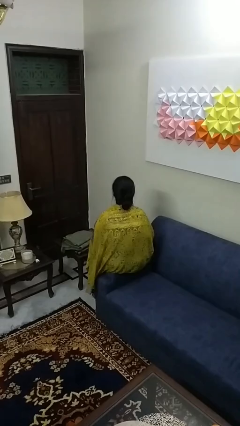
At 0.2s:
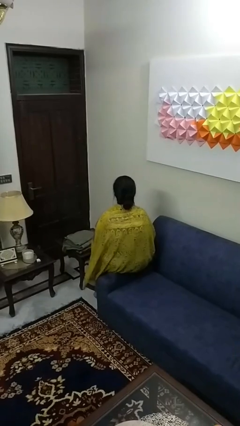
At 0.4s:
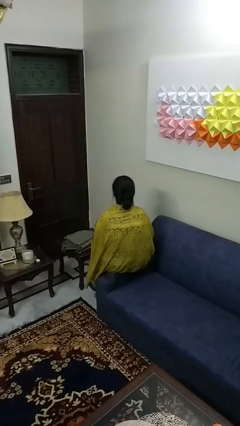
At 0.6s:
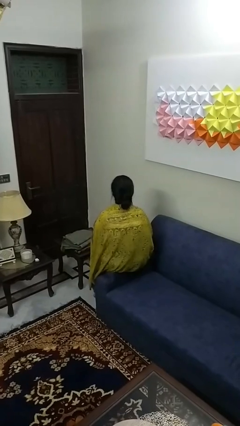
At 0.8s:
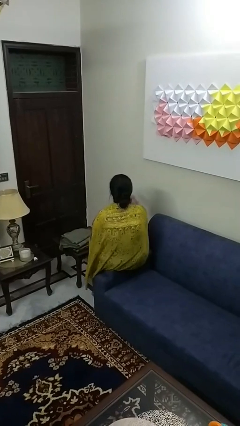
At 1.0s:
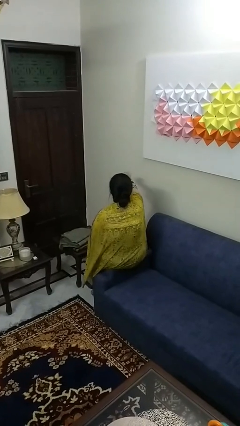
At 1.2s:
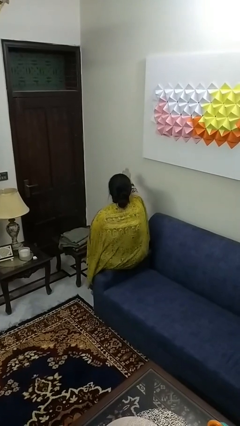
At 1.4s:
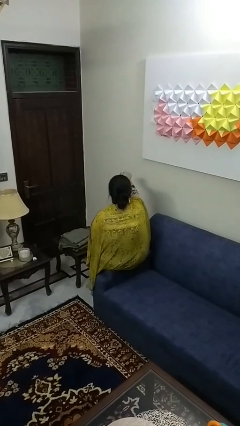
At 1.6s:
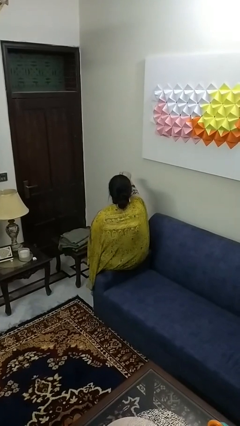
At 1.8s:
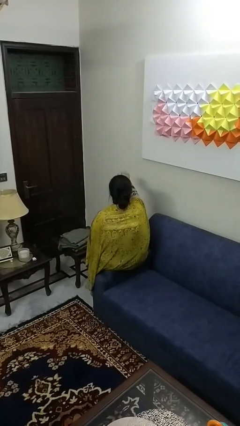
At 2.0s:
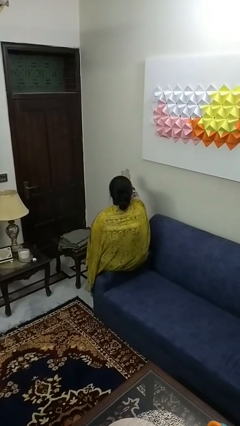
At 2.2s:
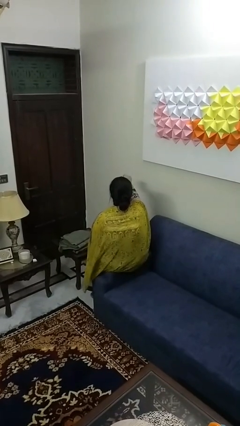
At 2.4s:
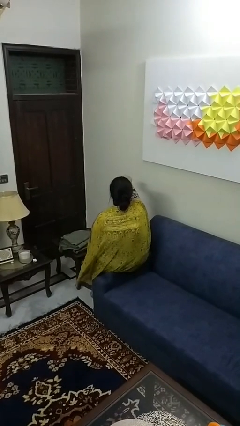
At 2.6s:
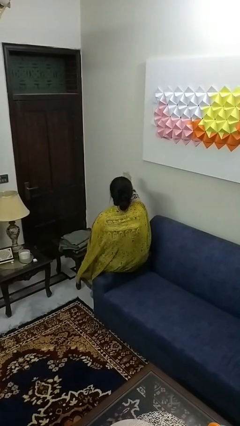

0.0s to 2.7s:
person gestures come here

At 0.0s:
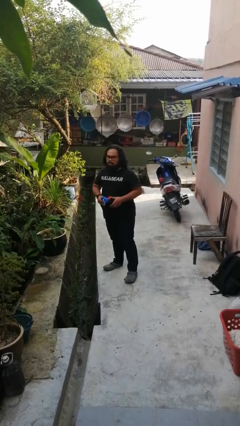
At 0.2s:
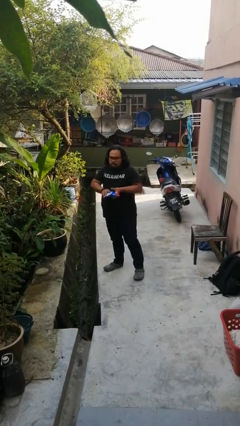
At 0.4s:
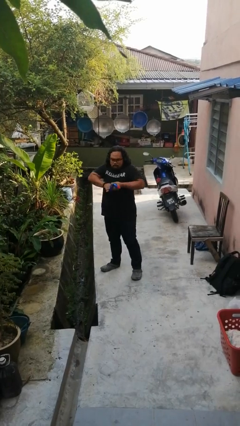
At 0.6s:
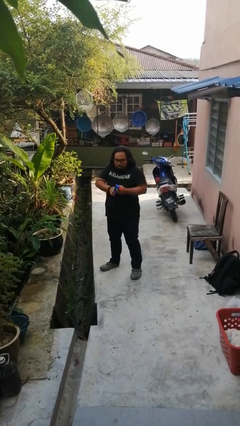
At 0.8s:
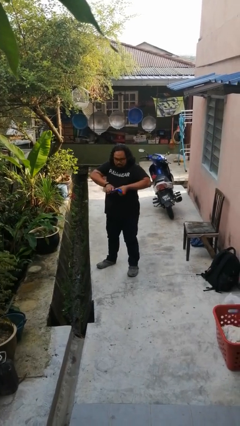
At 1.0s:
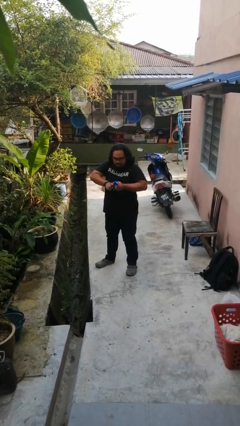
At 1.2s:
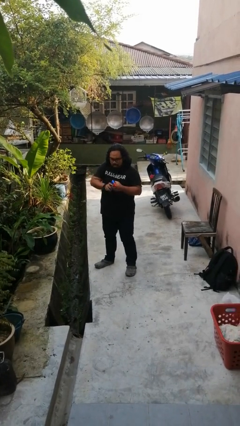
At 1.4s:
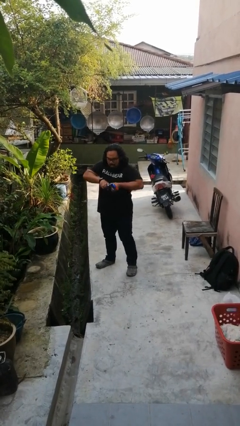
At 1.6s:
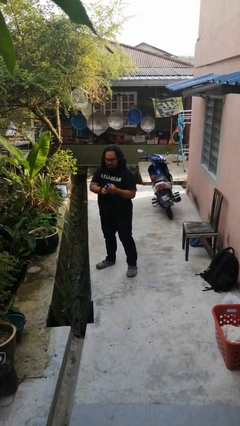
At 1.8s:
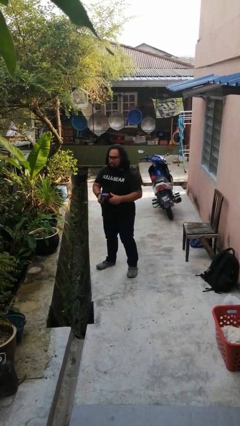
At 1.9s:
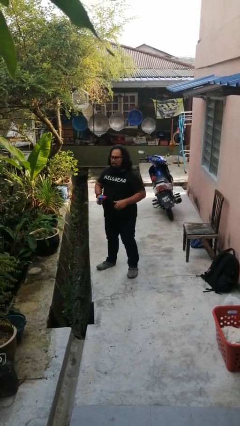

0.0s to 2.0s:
person squeezes object

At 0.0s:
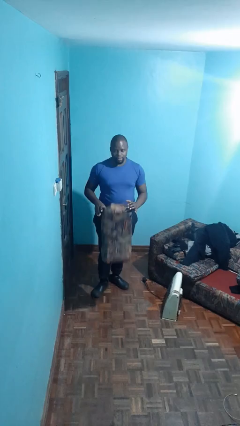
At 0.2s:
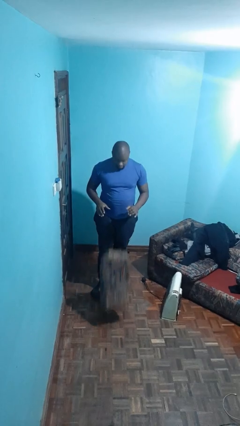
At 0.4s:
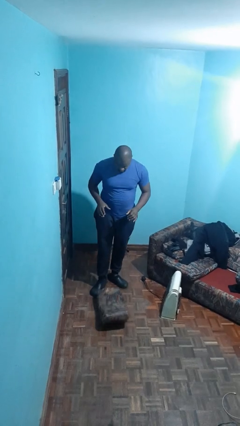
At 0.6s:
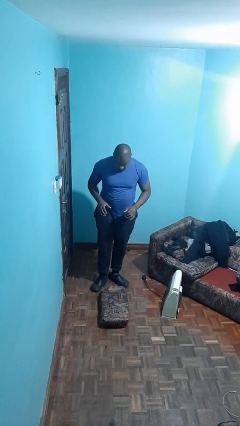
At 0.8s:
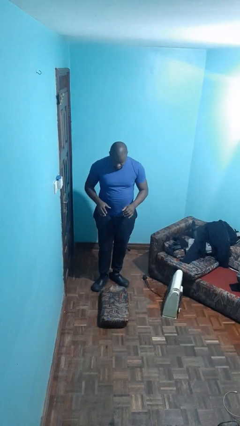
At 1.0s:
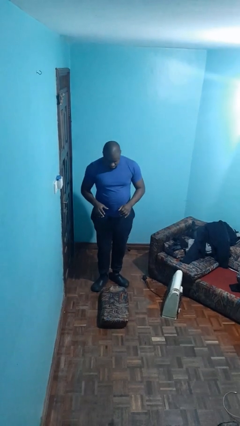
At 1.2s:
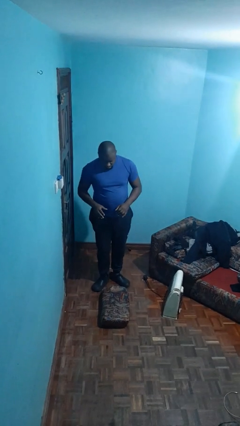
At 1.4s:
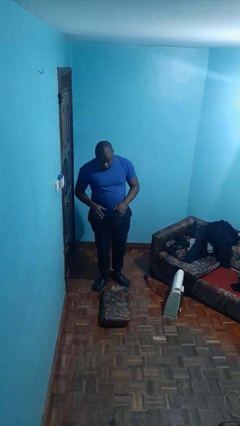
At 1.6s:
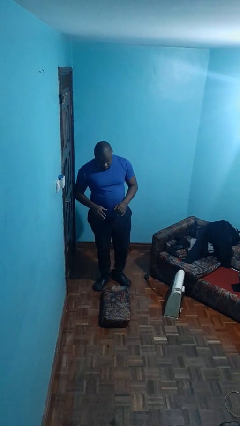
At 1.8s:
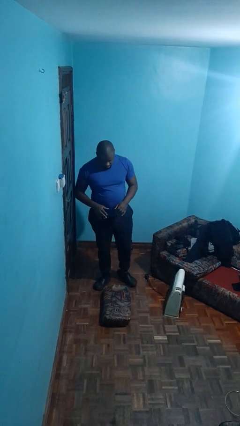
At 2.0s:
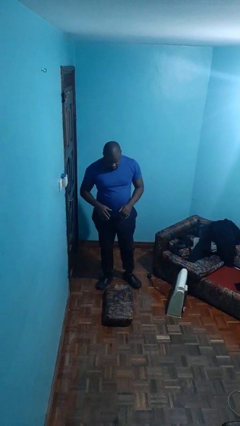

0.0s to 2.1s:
person drops object

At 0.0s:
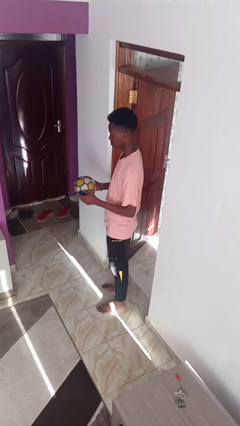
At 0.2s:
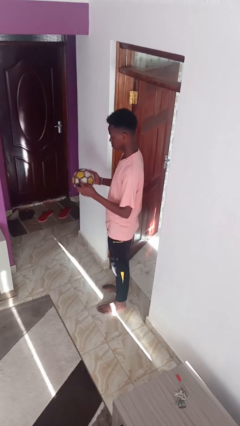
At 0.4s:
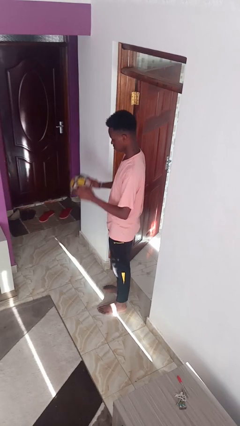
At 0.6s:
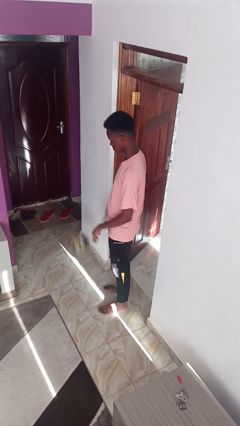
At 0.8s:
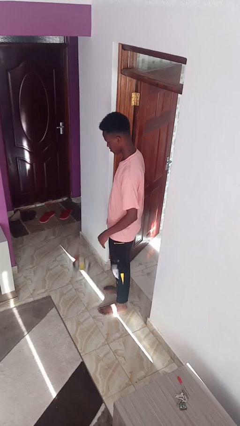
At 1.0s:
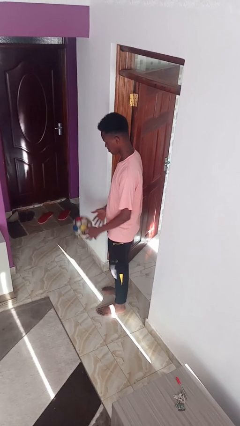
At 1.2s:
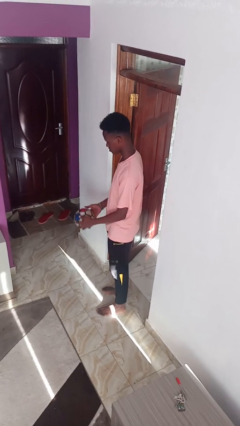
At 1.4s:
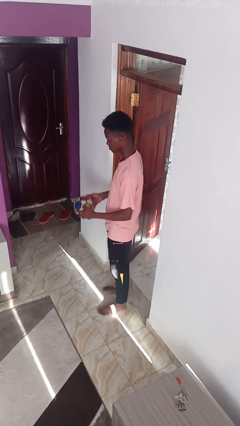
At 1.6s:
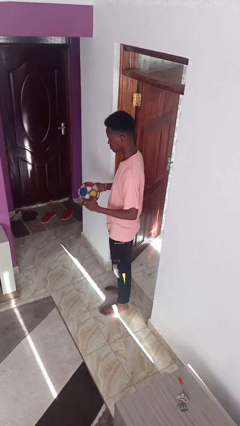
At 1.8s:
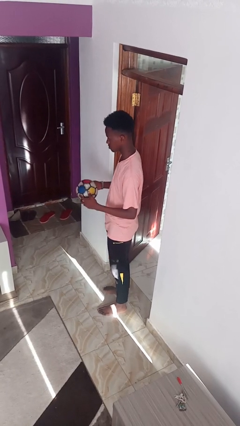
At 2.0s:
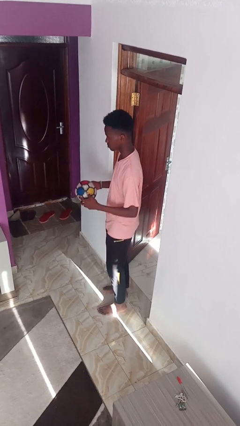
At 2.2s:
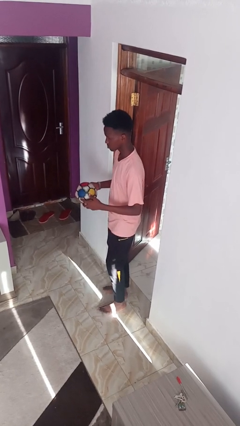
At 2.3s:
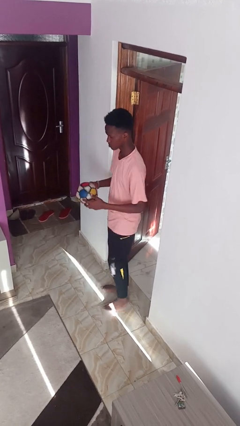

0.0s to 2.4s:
person bounces ball on floor

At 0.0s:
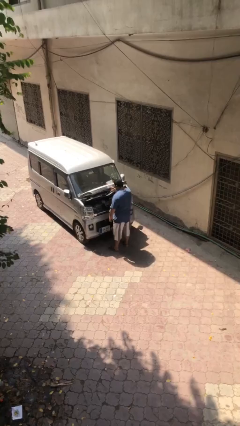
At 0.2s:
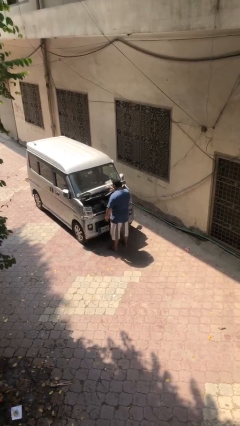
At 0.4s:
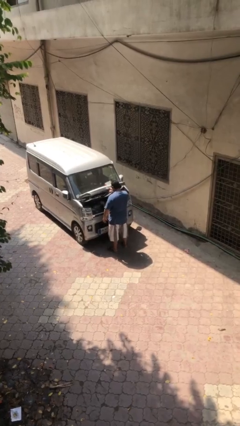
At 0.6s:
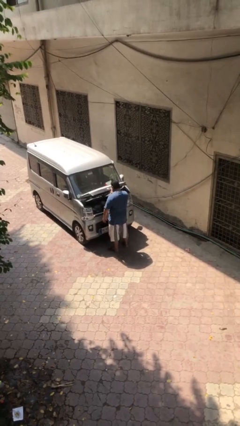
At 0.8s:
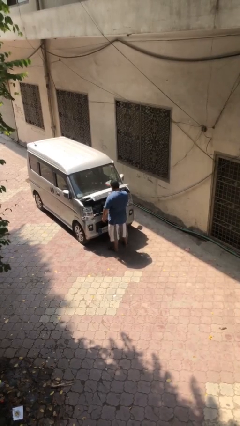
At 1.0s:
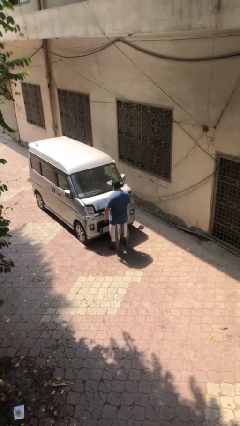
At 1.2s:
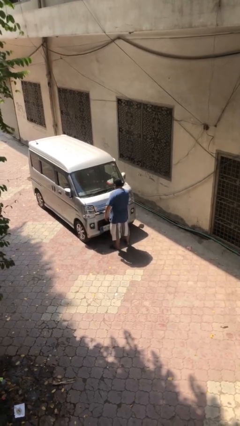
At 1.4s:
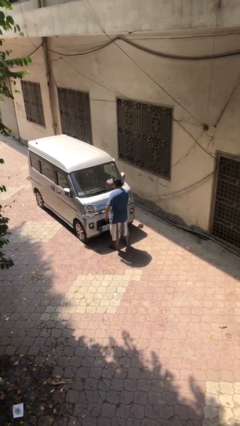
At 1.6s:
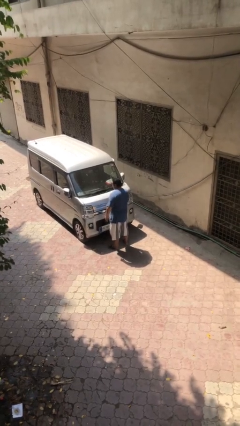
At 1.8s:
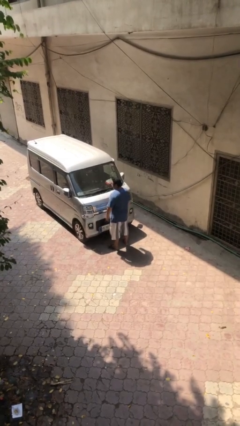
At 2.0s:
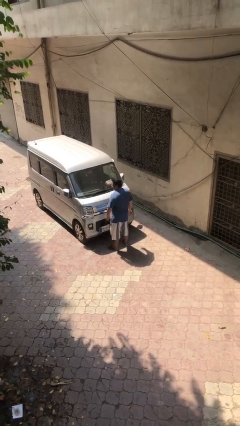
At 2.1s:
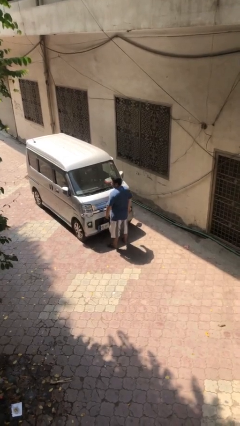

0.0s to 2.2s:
person closes car hood

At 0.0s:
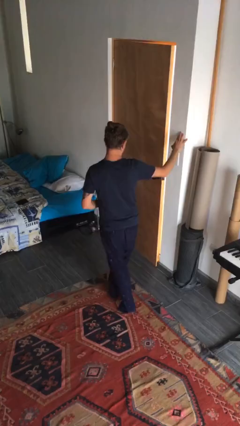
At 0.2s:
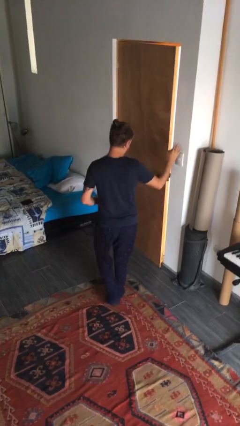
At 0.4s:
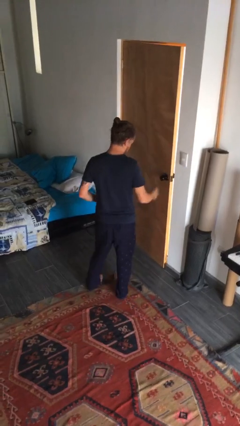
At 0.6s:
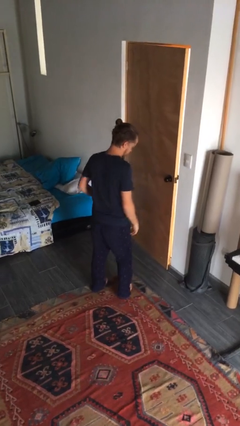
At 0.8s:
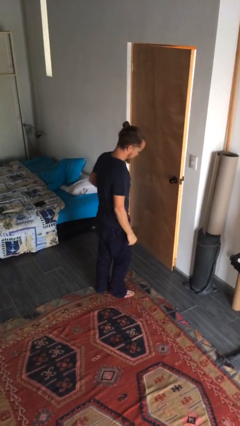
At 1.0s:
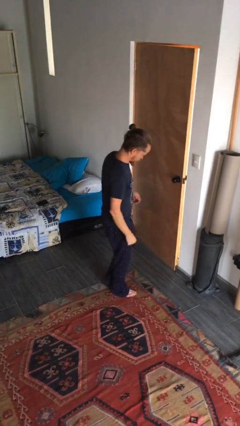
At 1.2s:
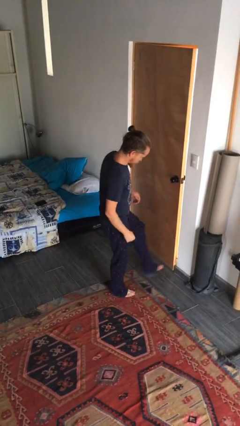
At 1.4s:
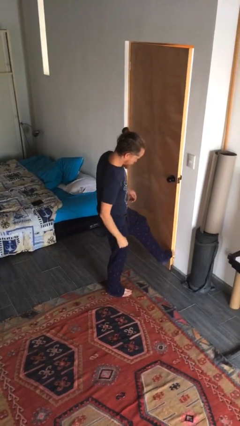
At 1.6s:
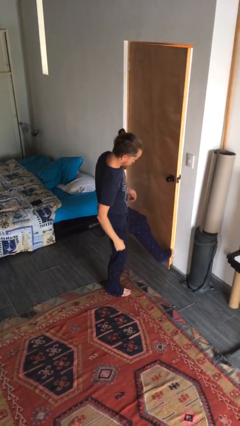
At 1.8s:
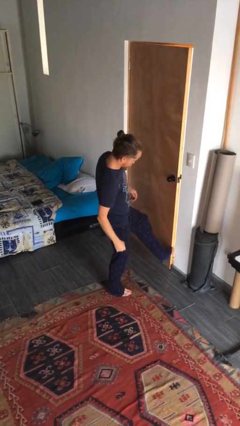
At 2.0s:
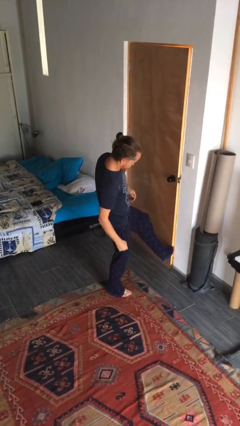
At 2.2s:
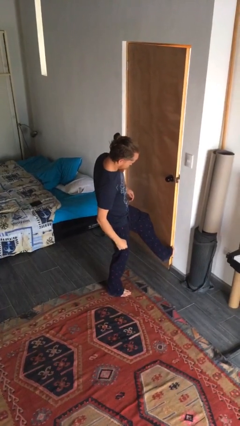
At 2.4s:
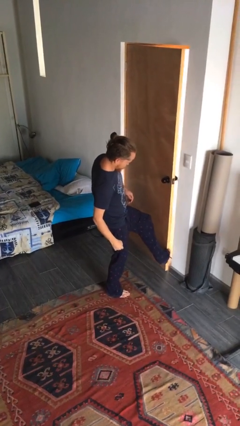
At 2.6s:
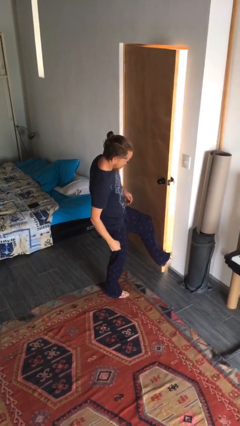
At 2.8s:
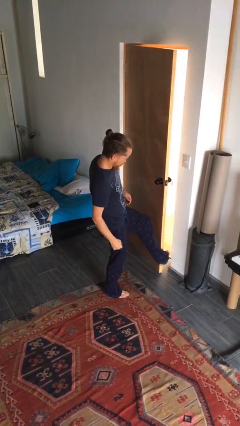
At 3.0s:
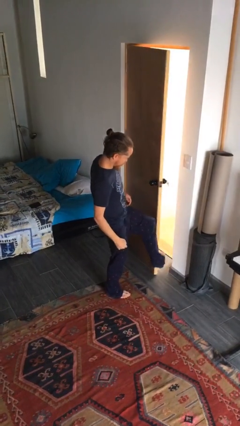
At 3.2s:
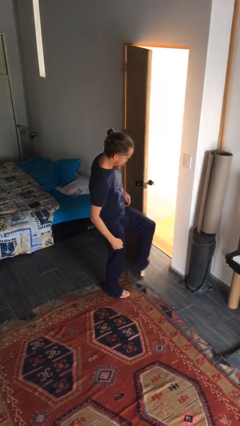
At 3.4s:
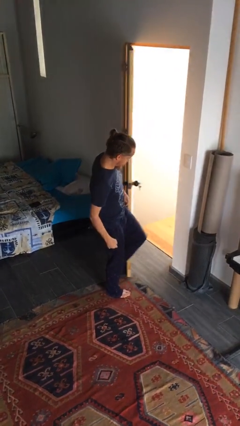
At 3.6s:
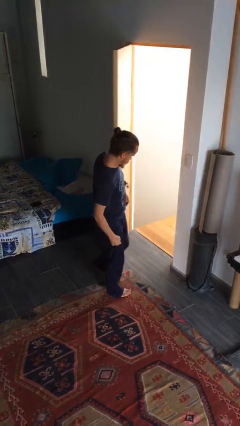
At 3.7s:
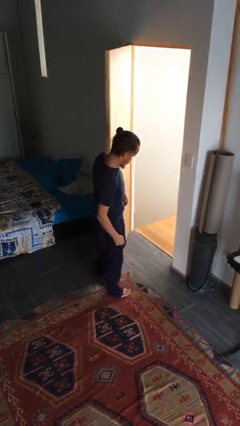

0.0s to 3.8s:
person opens facility door

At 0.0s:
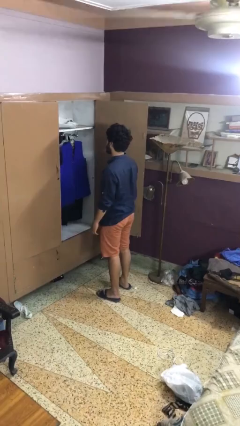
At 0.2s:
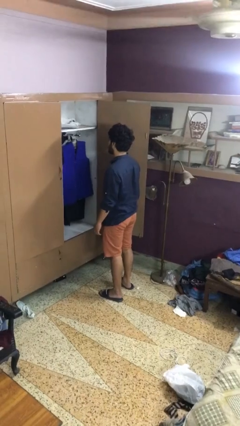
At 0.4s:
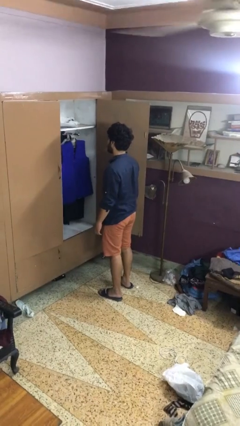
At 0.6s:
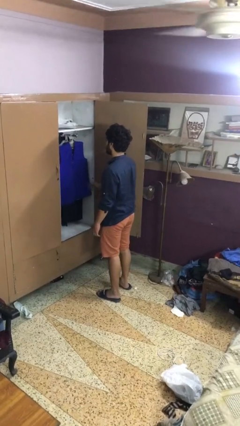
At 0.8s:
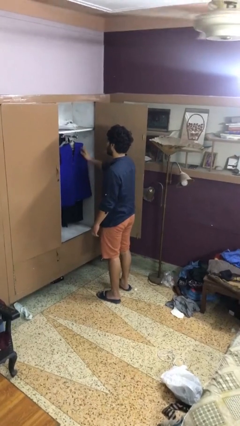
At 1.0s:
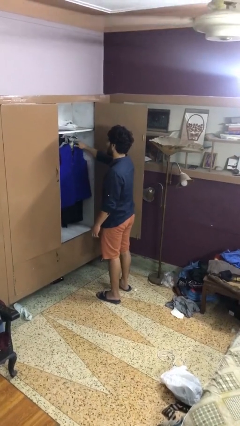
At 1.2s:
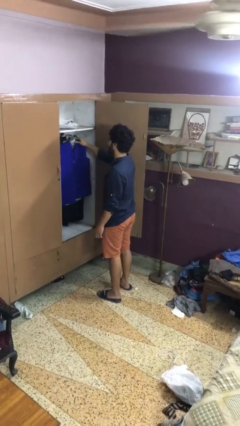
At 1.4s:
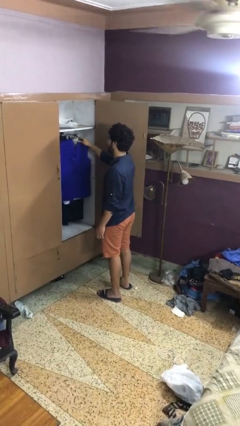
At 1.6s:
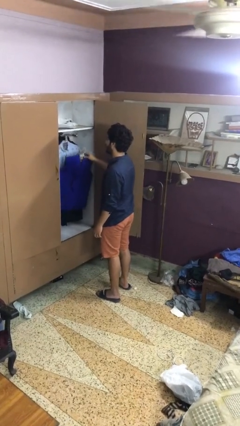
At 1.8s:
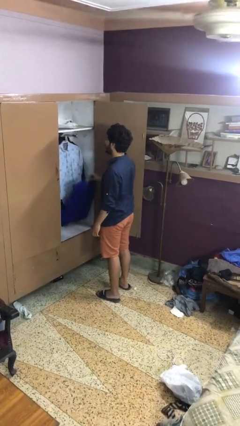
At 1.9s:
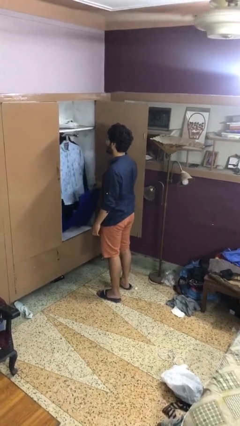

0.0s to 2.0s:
person takes clothes from closet

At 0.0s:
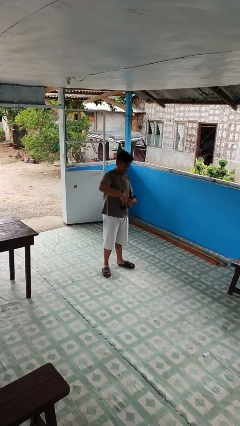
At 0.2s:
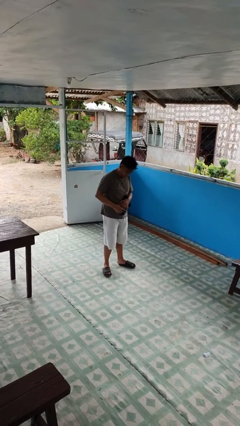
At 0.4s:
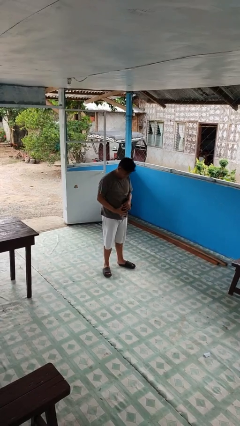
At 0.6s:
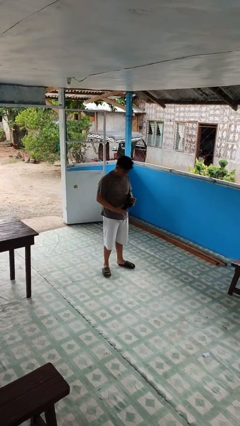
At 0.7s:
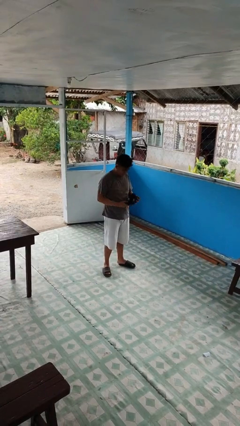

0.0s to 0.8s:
person catches dropped object
